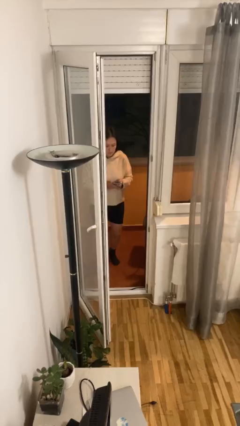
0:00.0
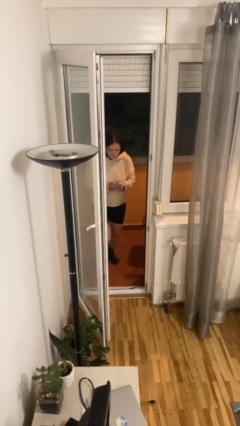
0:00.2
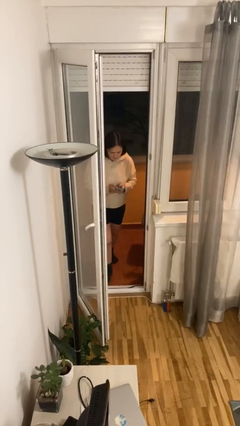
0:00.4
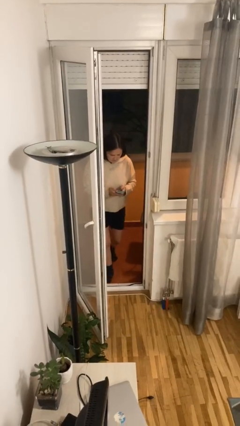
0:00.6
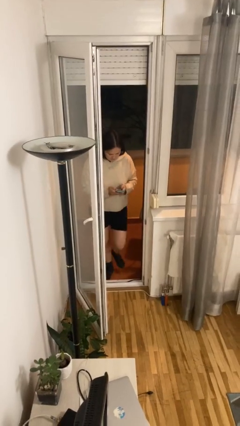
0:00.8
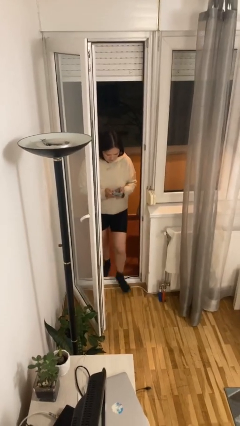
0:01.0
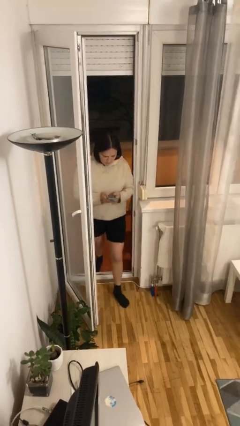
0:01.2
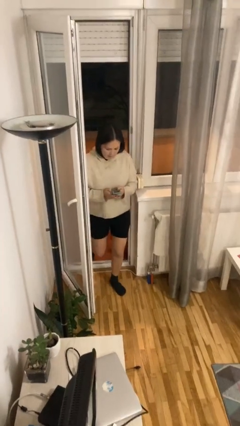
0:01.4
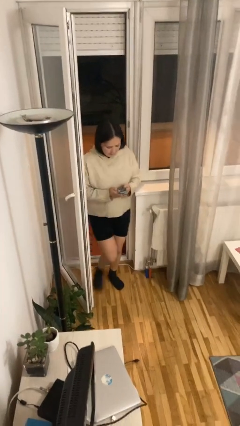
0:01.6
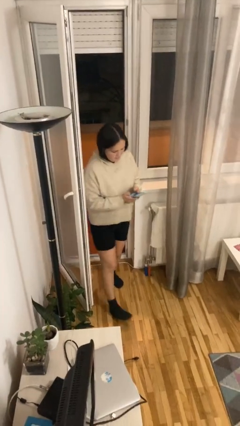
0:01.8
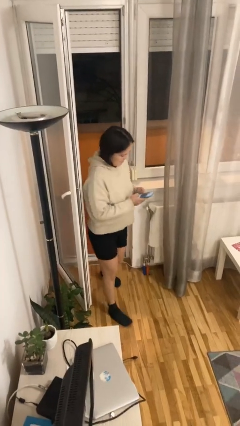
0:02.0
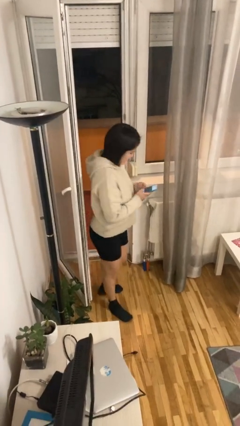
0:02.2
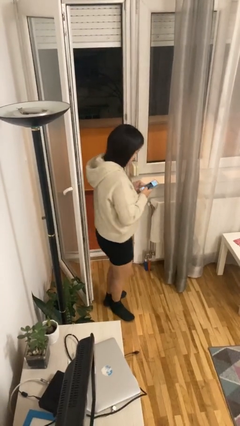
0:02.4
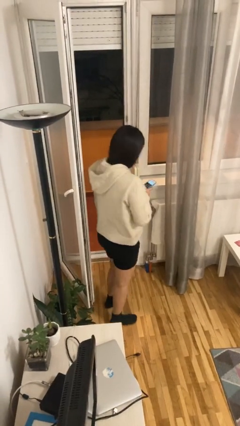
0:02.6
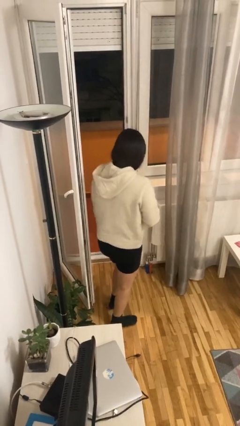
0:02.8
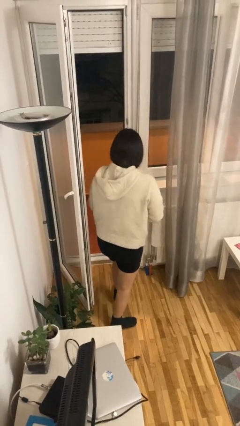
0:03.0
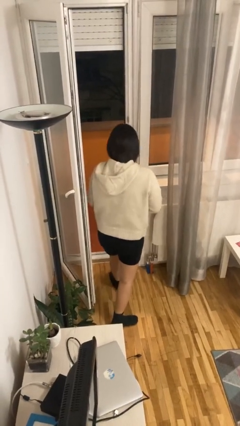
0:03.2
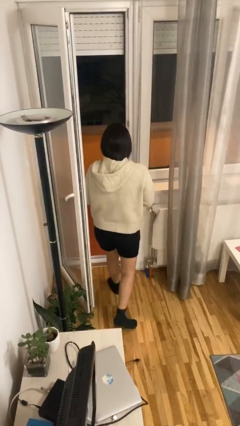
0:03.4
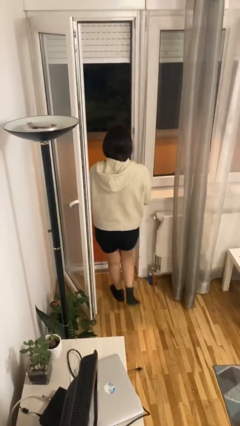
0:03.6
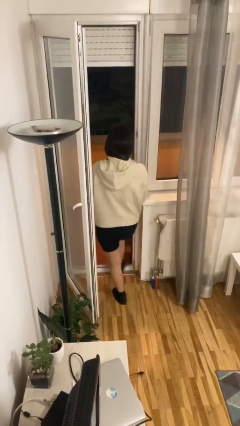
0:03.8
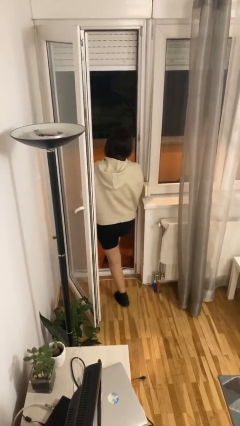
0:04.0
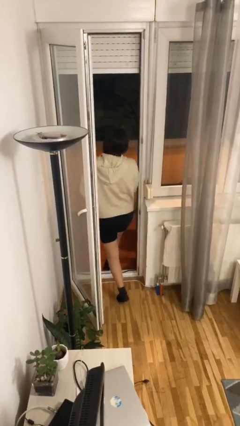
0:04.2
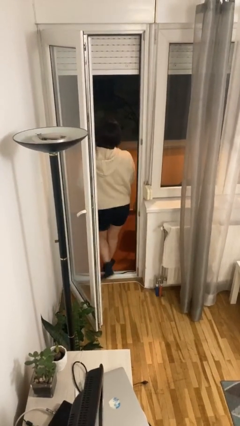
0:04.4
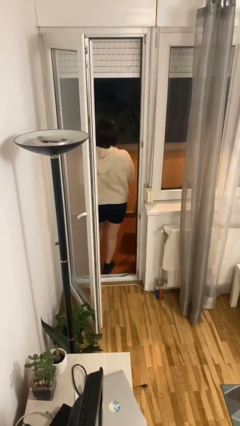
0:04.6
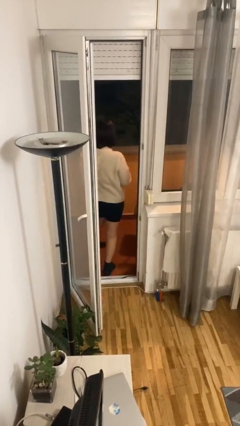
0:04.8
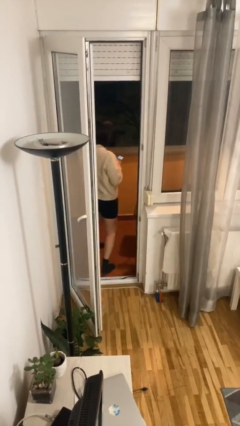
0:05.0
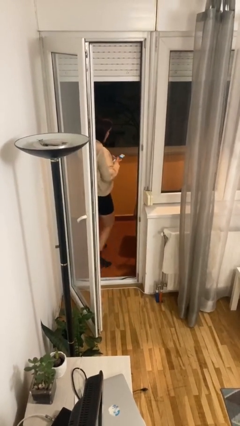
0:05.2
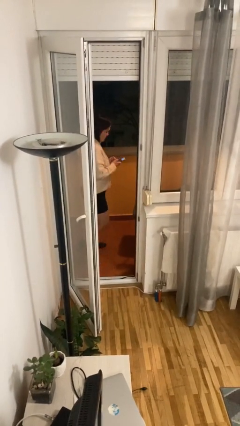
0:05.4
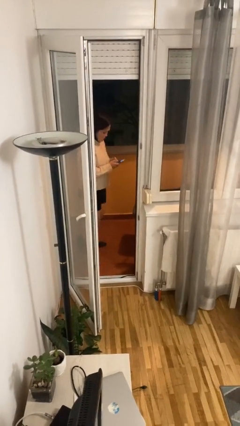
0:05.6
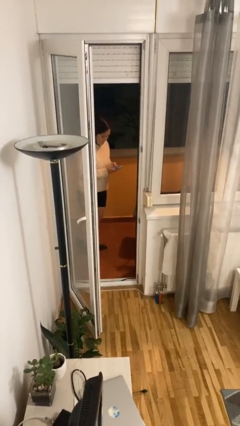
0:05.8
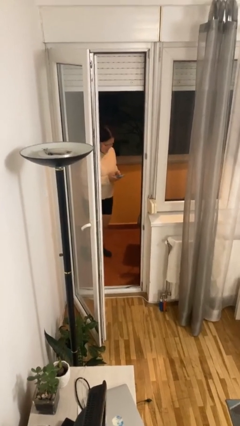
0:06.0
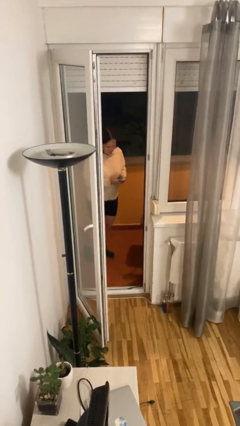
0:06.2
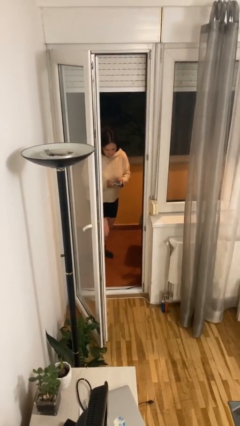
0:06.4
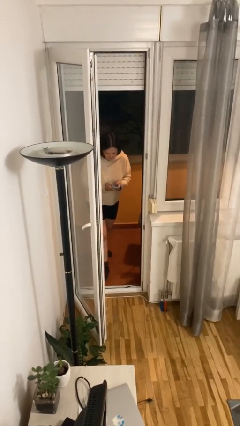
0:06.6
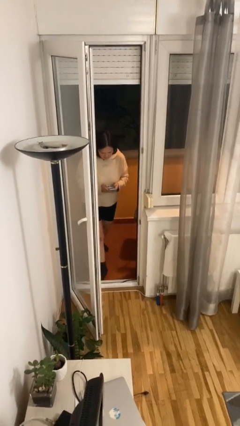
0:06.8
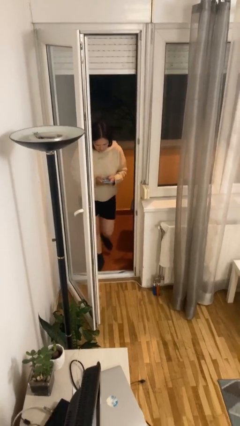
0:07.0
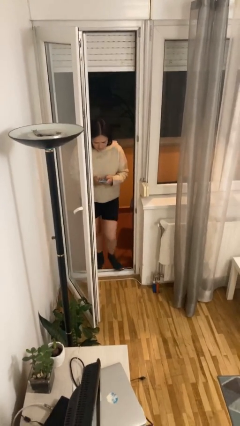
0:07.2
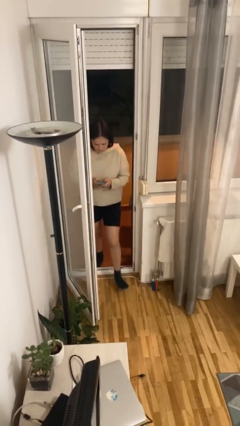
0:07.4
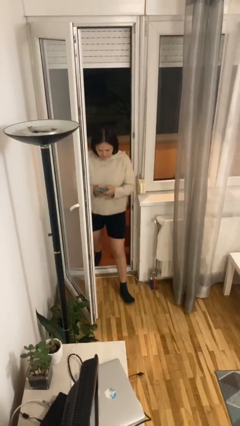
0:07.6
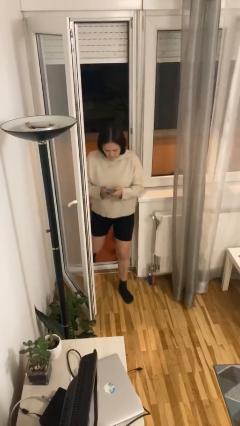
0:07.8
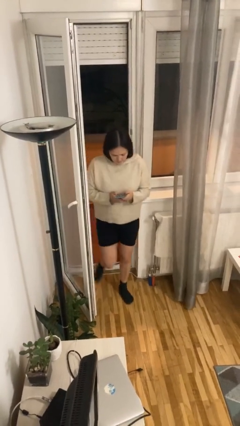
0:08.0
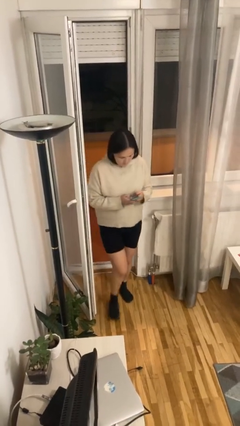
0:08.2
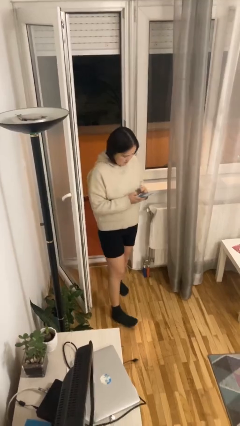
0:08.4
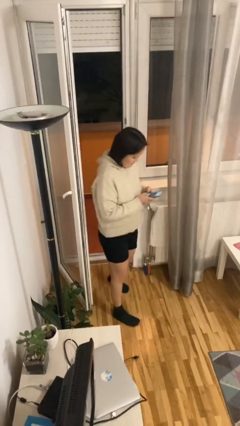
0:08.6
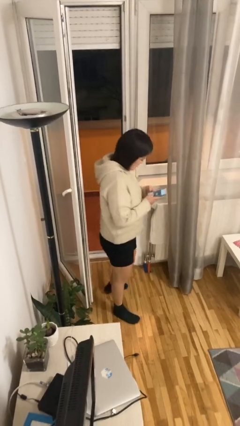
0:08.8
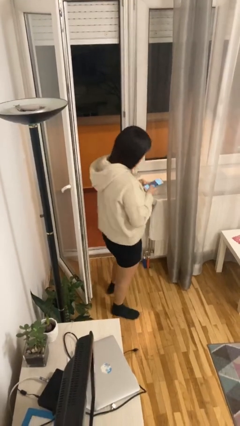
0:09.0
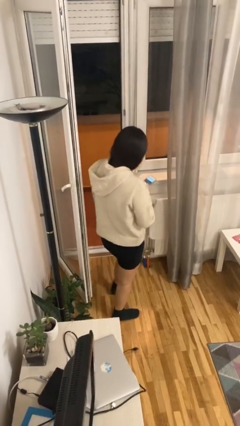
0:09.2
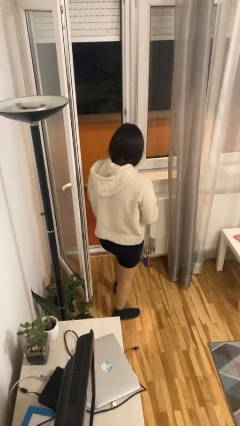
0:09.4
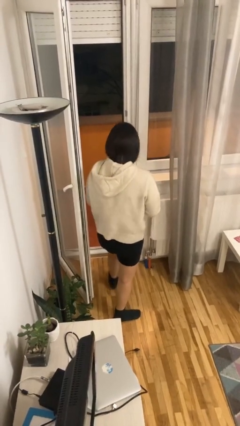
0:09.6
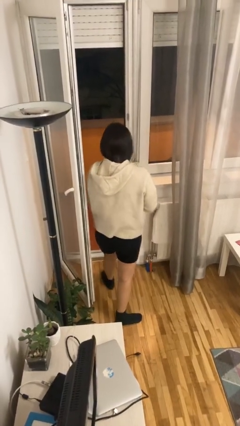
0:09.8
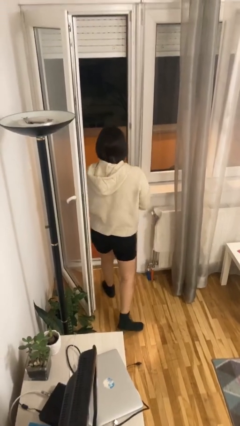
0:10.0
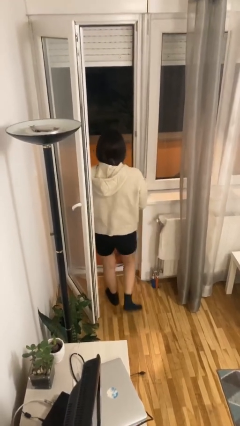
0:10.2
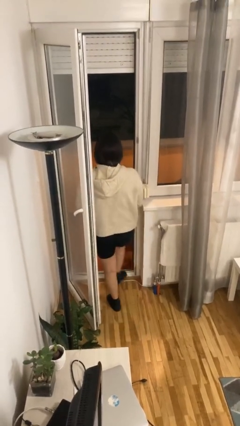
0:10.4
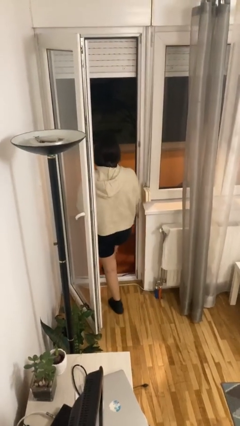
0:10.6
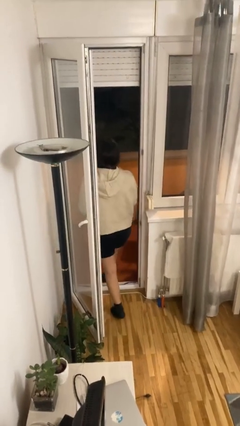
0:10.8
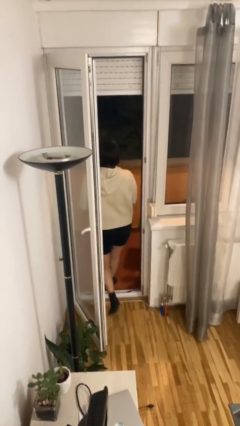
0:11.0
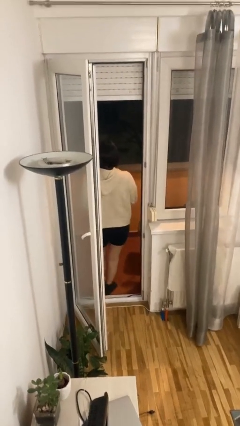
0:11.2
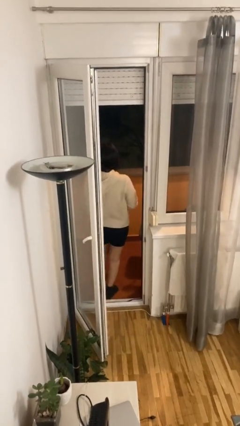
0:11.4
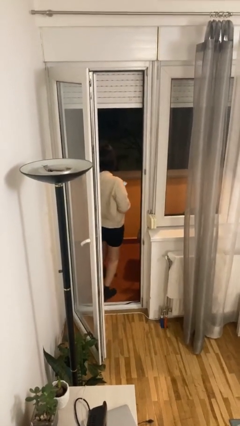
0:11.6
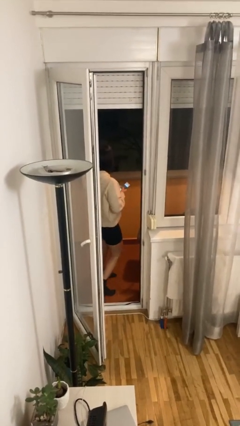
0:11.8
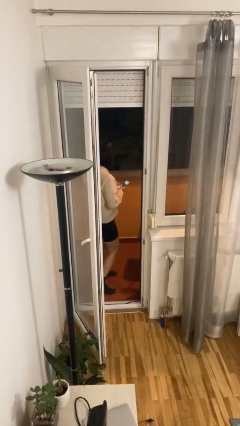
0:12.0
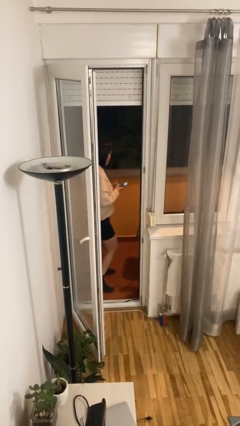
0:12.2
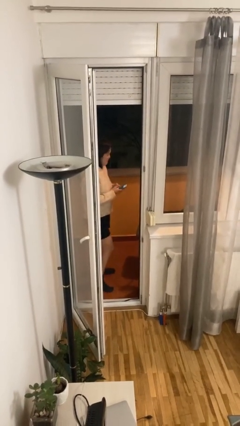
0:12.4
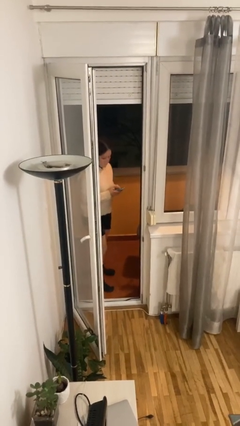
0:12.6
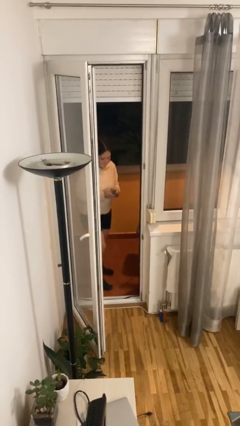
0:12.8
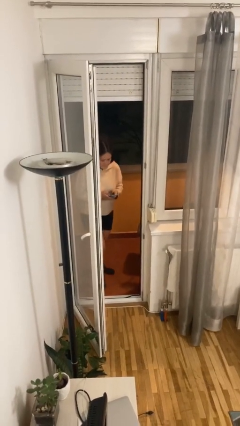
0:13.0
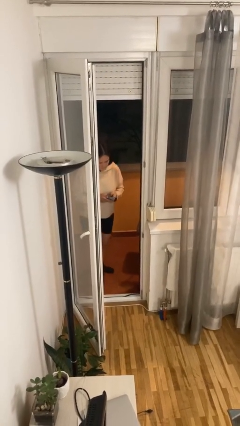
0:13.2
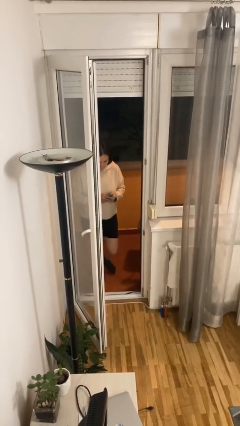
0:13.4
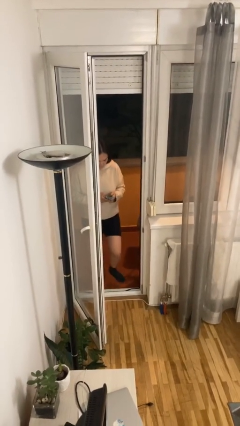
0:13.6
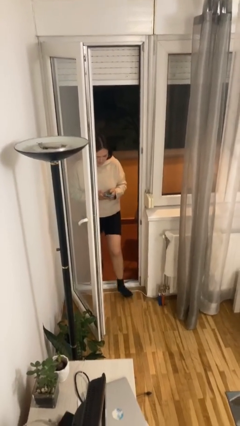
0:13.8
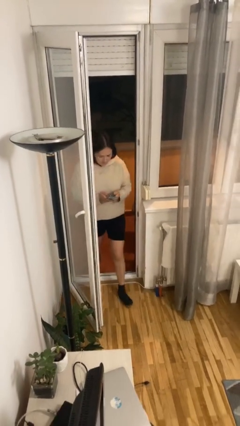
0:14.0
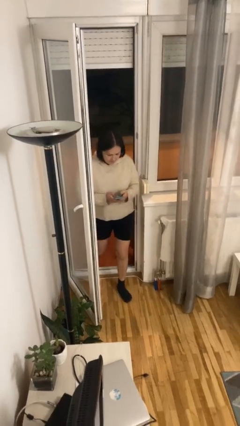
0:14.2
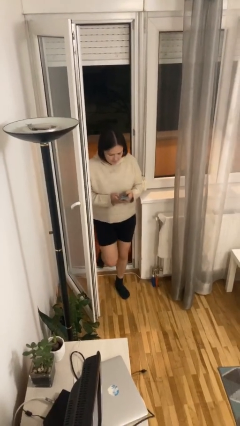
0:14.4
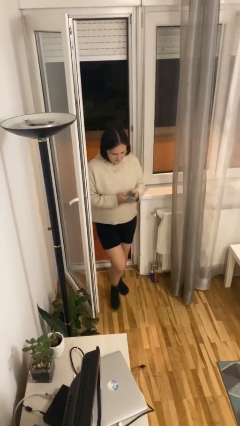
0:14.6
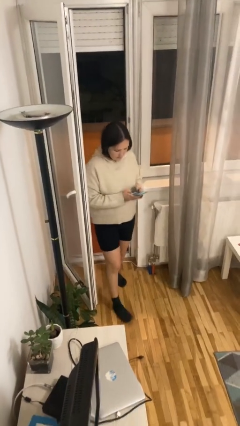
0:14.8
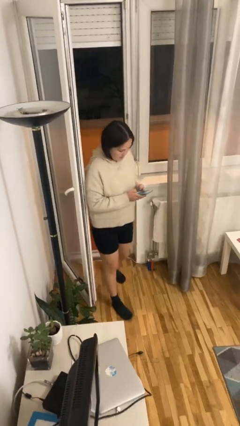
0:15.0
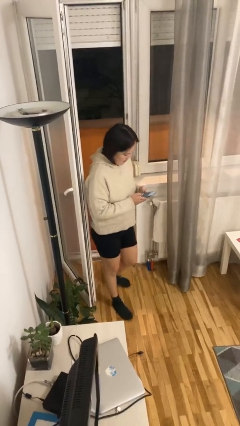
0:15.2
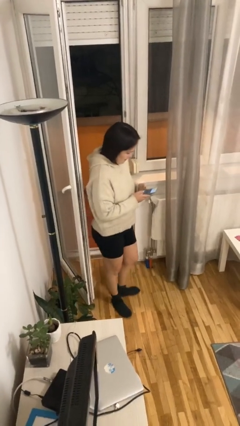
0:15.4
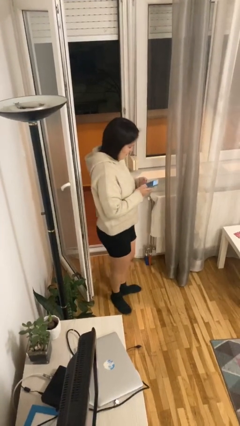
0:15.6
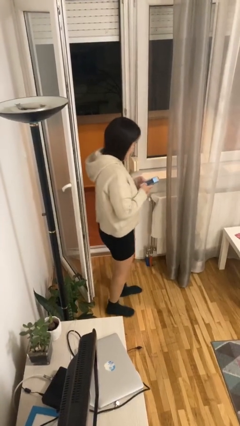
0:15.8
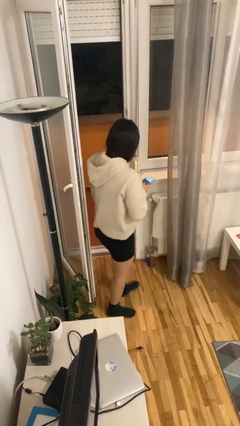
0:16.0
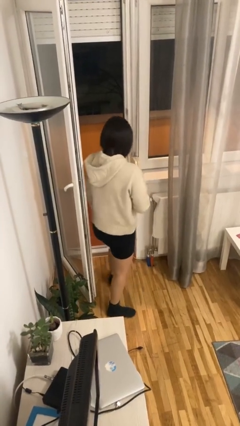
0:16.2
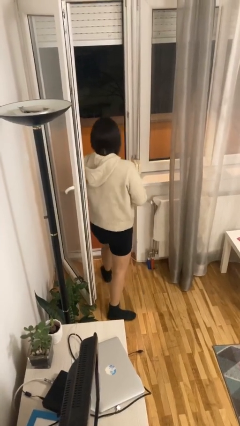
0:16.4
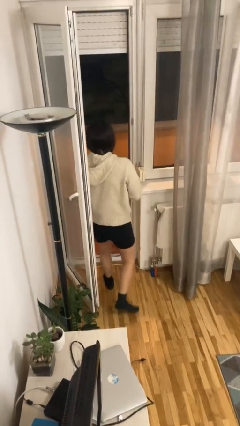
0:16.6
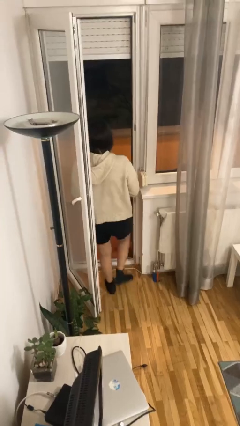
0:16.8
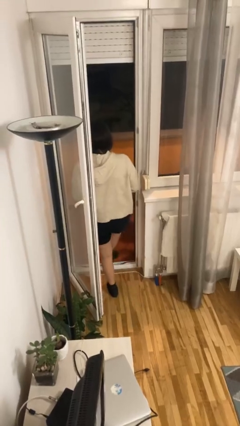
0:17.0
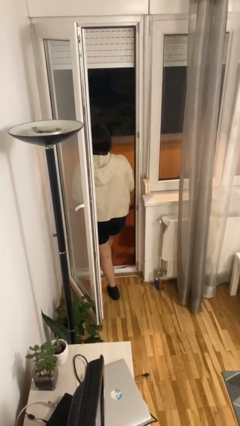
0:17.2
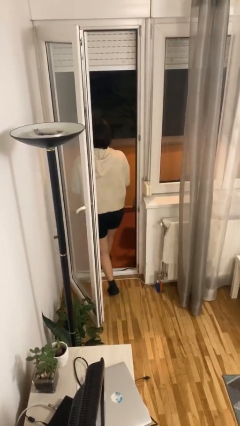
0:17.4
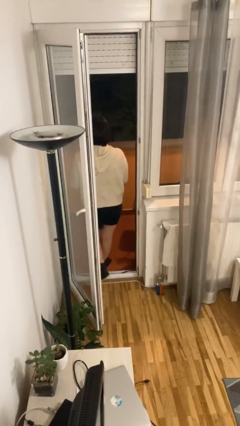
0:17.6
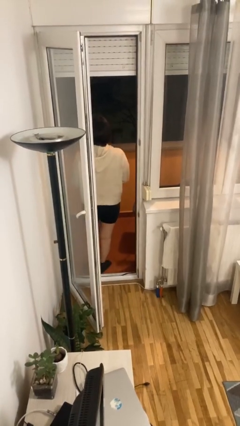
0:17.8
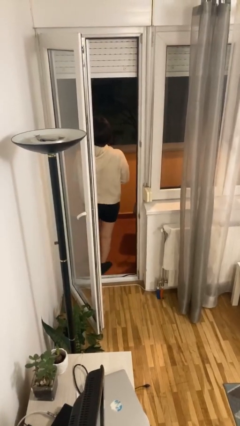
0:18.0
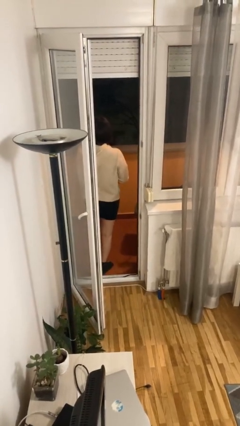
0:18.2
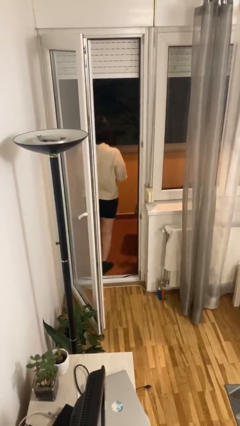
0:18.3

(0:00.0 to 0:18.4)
person texts on phone

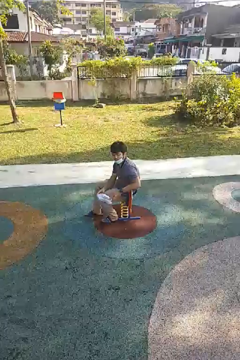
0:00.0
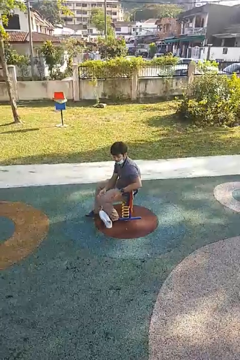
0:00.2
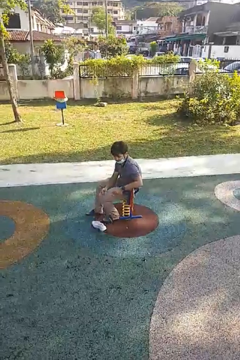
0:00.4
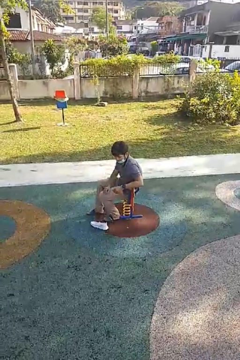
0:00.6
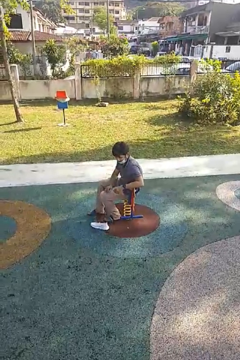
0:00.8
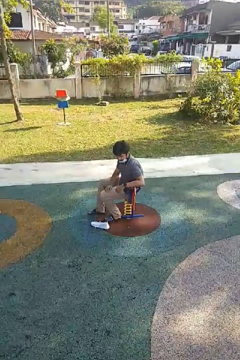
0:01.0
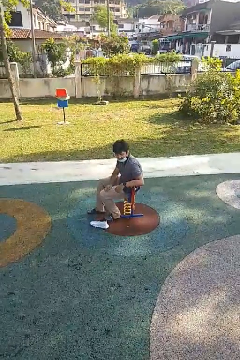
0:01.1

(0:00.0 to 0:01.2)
person drops object
